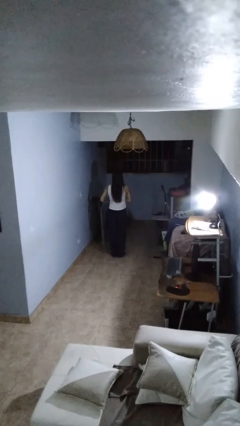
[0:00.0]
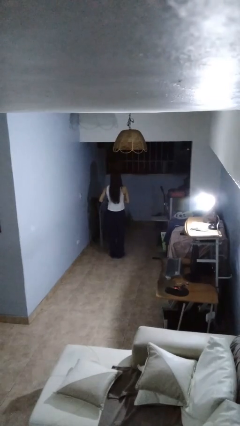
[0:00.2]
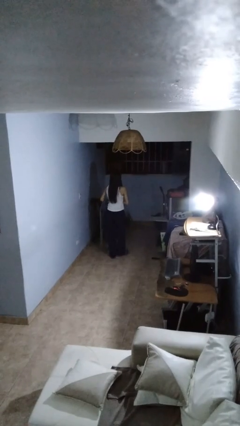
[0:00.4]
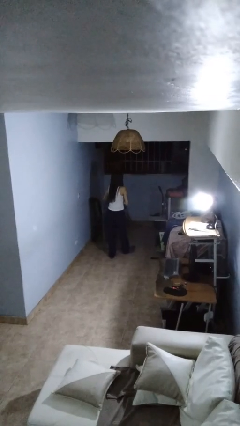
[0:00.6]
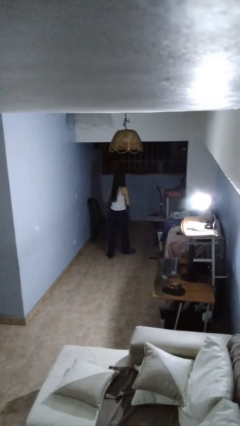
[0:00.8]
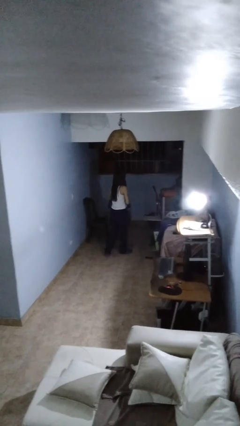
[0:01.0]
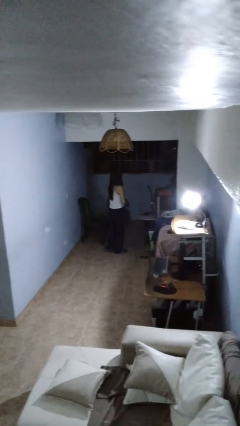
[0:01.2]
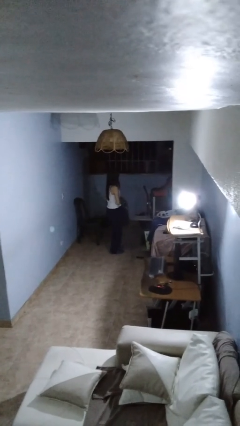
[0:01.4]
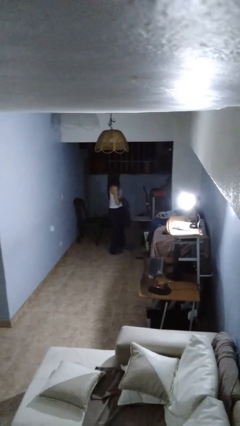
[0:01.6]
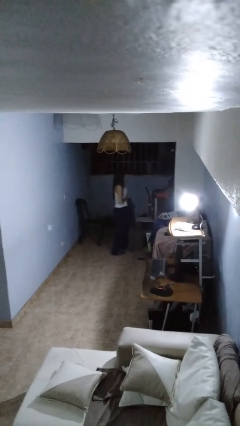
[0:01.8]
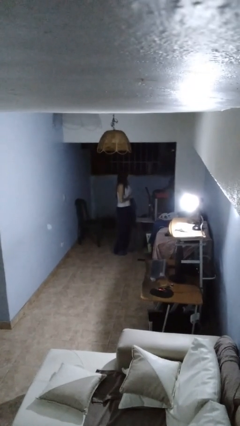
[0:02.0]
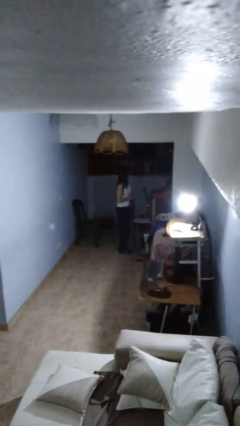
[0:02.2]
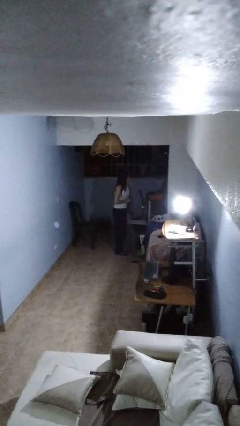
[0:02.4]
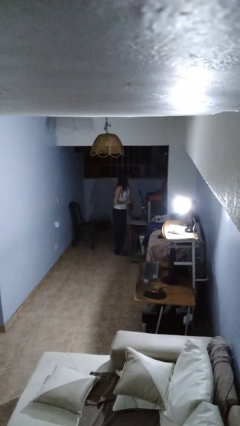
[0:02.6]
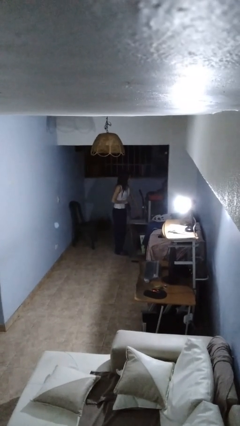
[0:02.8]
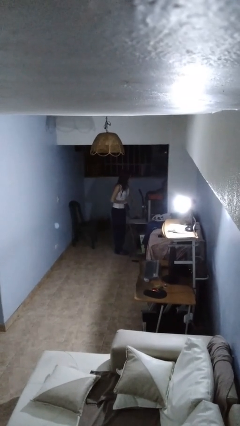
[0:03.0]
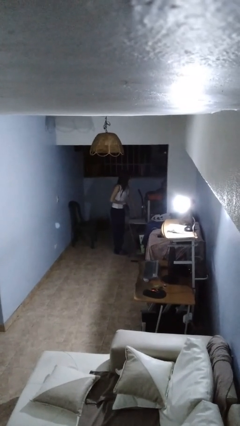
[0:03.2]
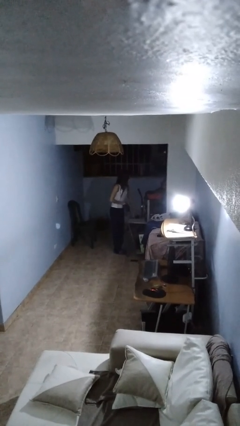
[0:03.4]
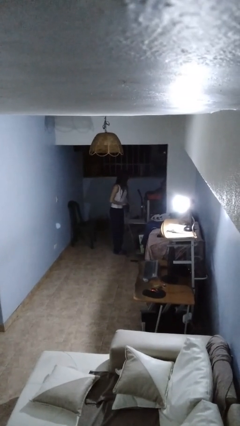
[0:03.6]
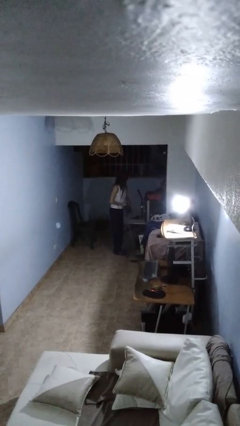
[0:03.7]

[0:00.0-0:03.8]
person carries furniture

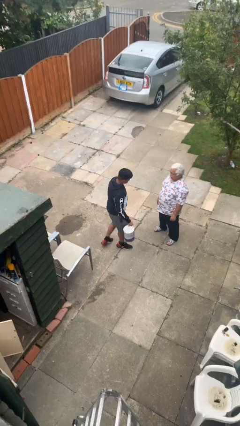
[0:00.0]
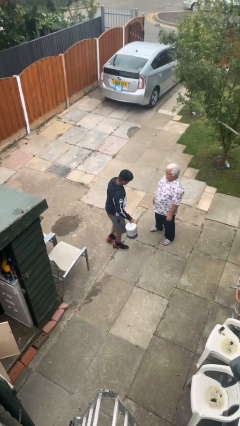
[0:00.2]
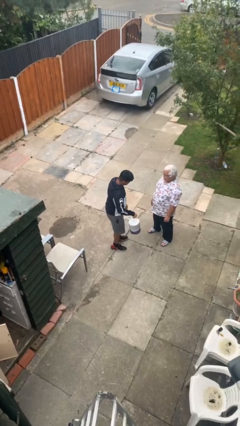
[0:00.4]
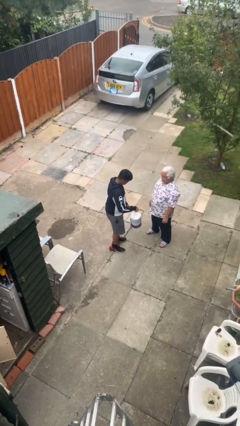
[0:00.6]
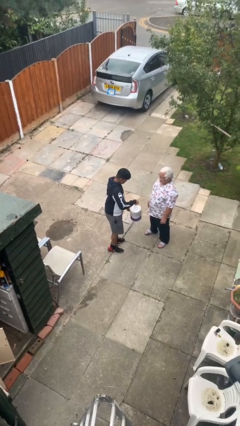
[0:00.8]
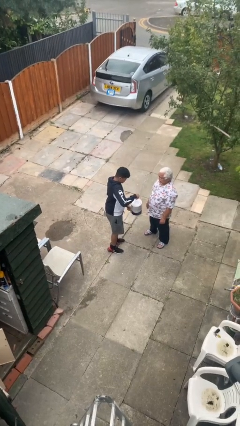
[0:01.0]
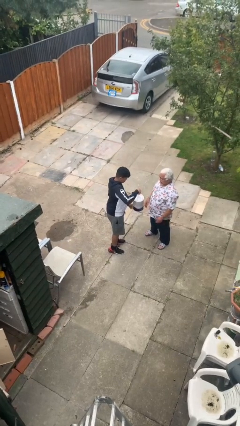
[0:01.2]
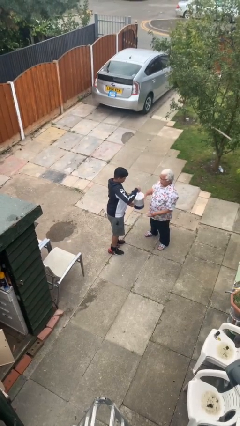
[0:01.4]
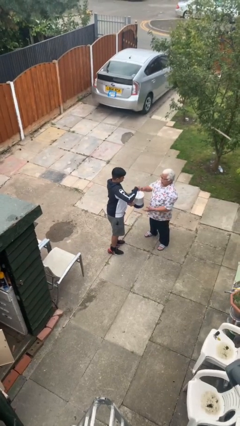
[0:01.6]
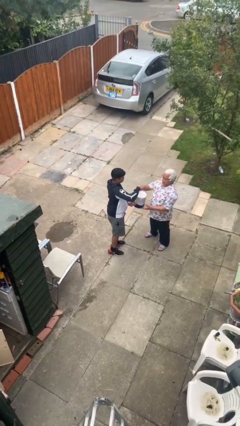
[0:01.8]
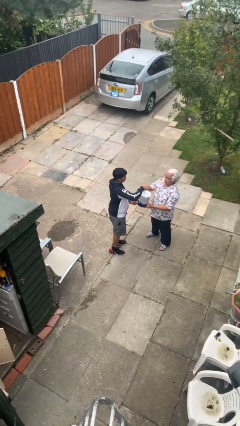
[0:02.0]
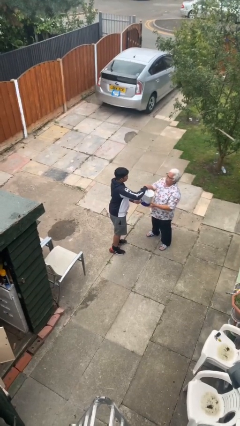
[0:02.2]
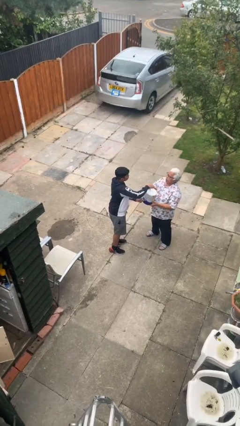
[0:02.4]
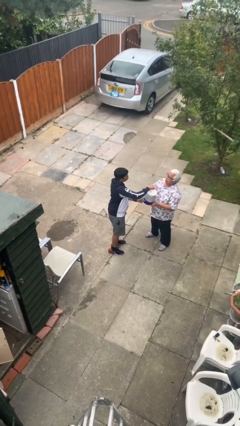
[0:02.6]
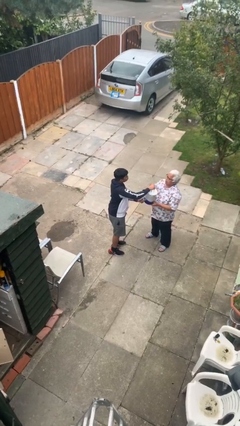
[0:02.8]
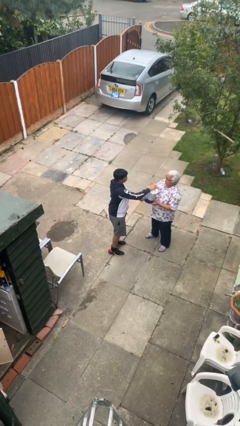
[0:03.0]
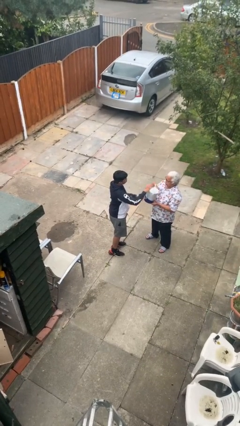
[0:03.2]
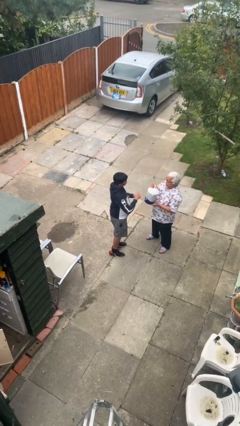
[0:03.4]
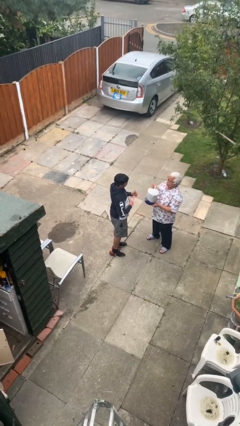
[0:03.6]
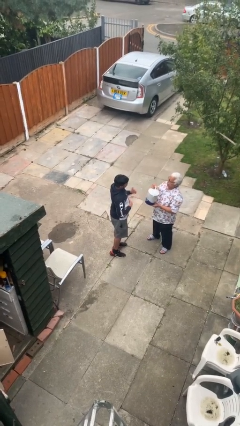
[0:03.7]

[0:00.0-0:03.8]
person transfers object to person

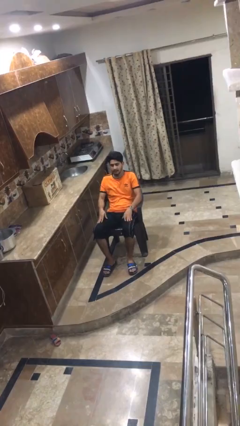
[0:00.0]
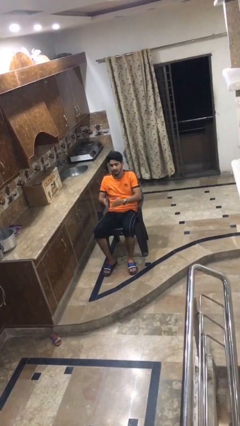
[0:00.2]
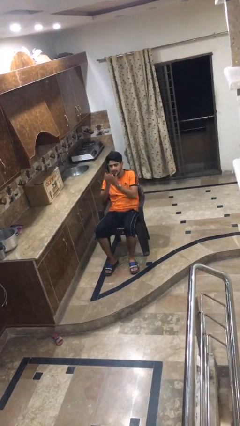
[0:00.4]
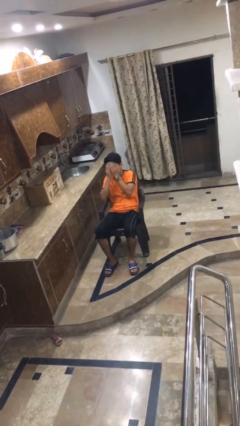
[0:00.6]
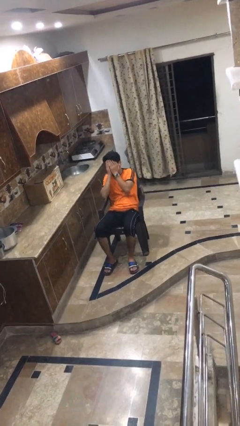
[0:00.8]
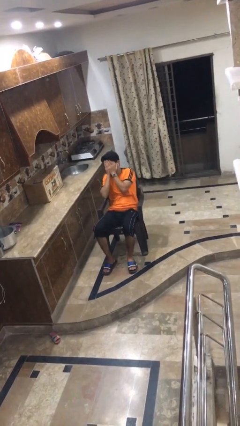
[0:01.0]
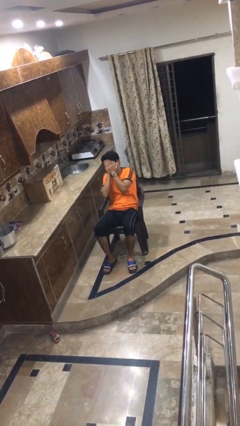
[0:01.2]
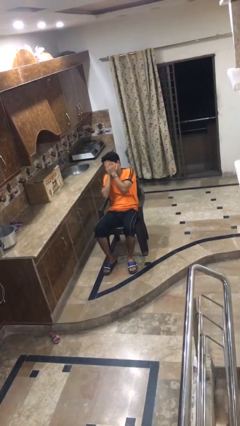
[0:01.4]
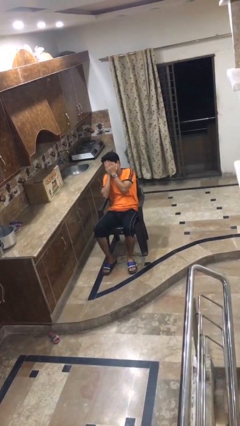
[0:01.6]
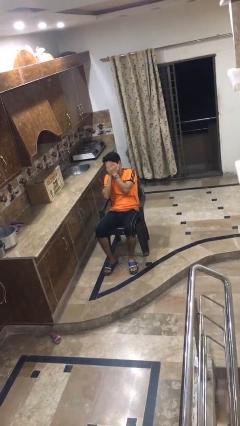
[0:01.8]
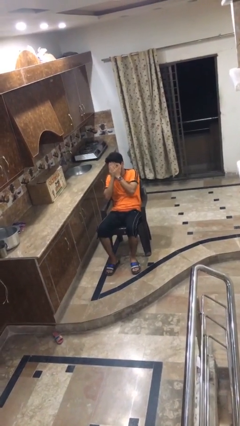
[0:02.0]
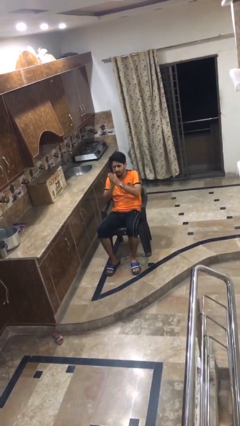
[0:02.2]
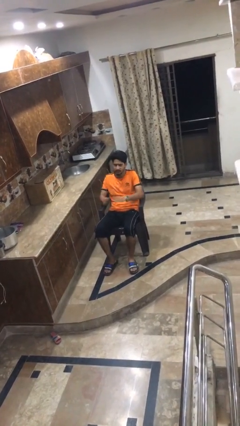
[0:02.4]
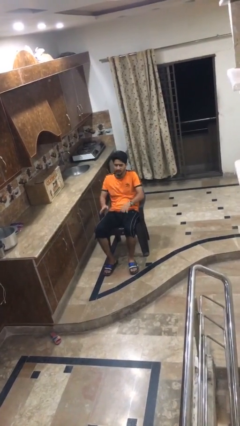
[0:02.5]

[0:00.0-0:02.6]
person covers face with hands

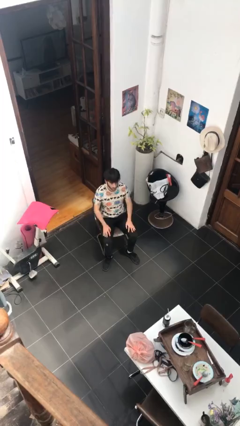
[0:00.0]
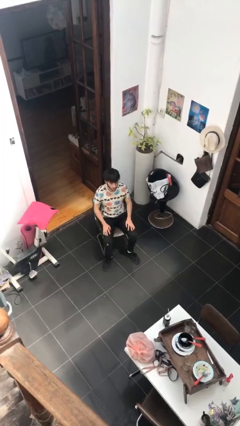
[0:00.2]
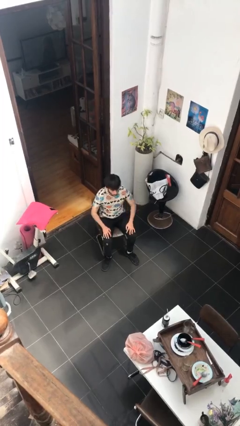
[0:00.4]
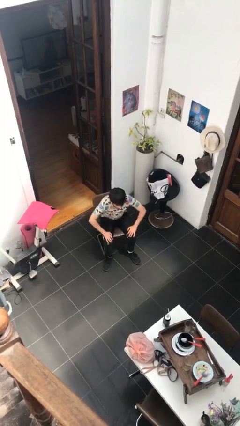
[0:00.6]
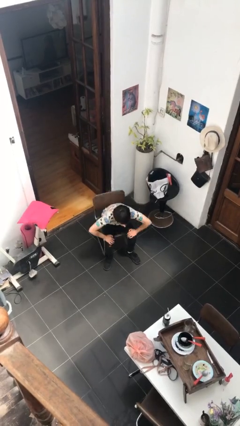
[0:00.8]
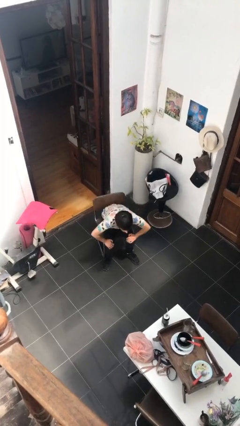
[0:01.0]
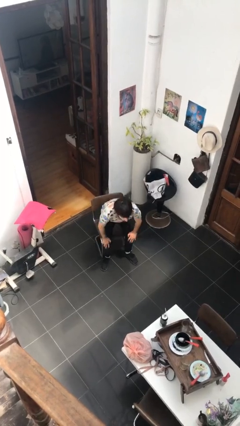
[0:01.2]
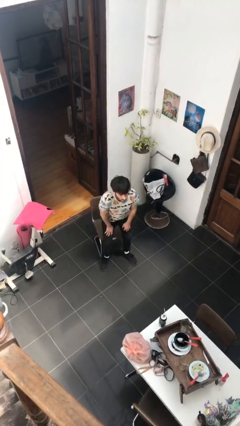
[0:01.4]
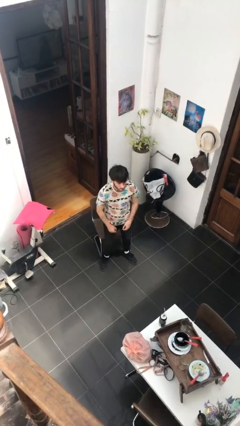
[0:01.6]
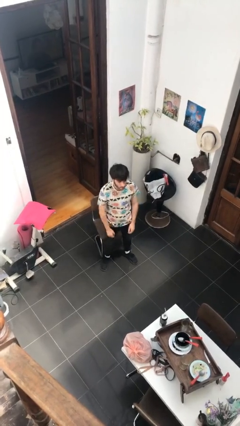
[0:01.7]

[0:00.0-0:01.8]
person stands up

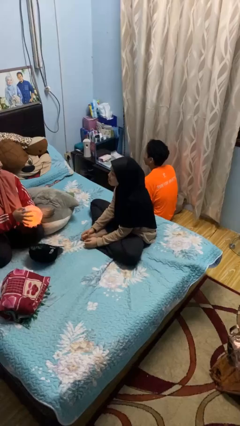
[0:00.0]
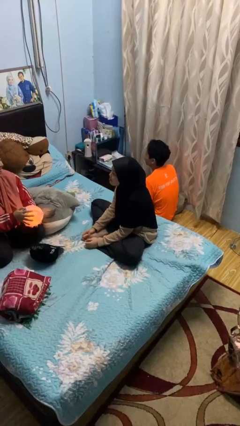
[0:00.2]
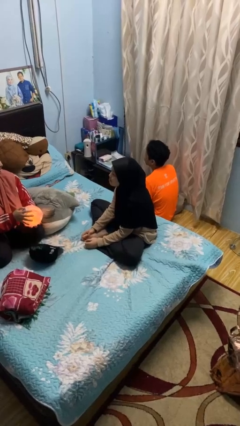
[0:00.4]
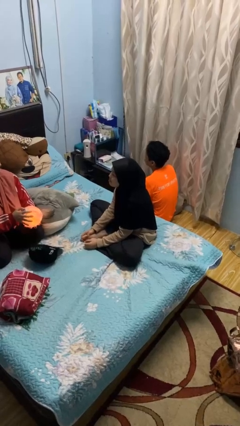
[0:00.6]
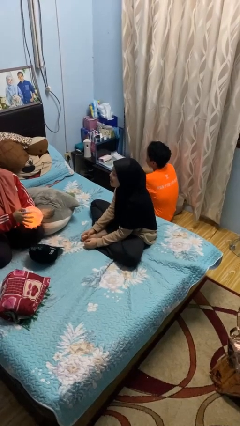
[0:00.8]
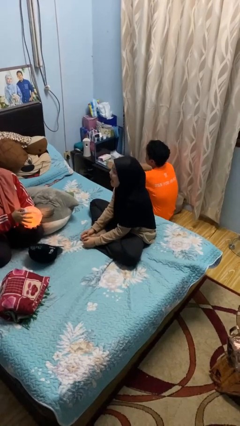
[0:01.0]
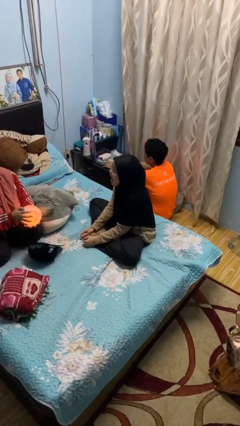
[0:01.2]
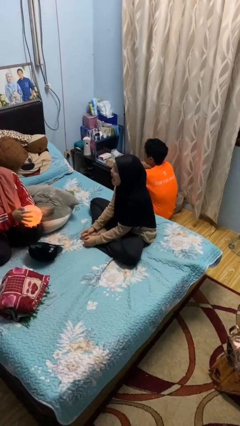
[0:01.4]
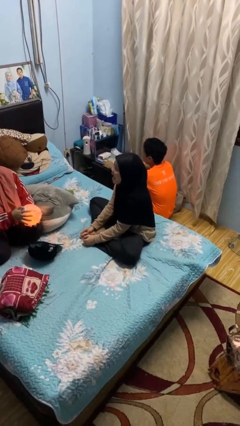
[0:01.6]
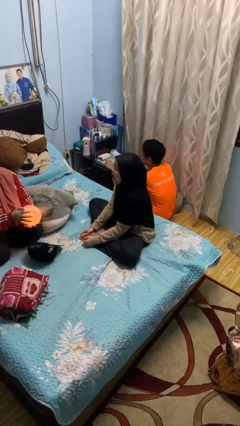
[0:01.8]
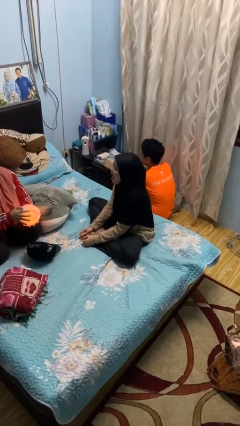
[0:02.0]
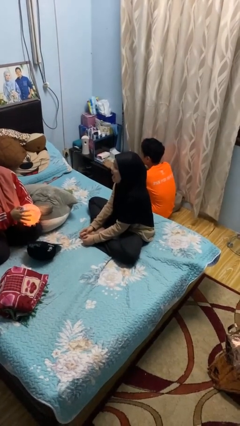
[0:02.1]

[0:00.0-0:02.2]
person laughs with person

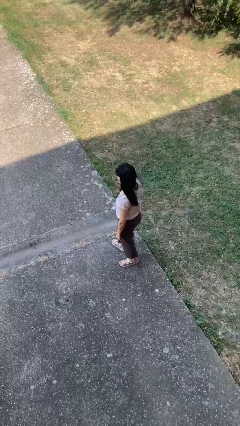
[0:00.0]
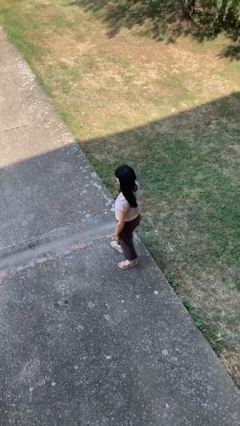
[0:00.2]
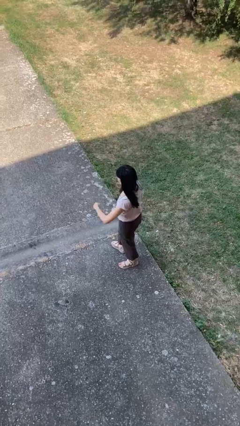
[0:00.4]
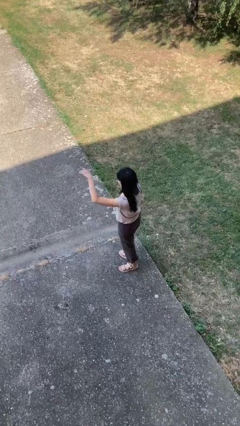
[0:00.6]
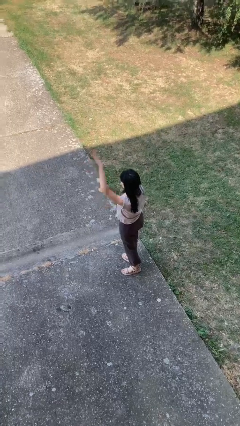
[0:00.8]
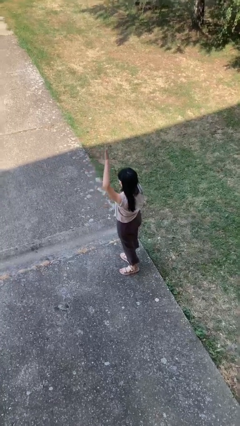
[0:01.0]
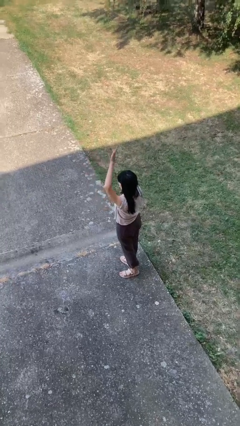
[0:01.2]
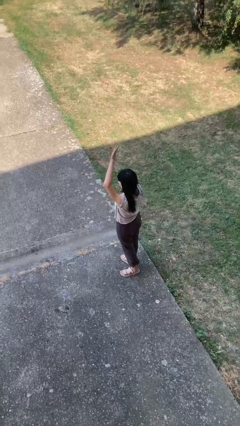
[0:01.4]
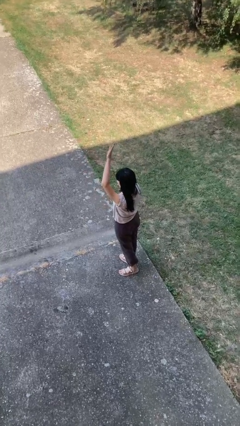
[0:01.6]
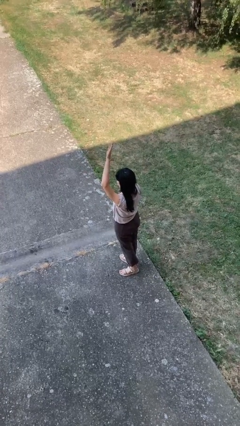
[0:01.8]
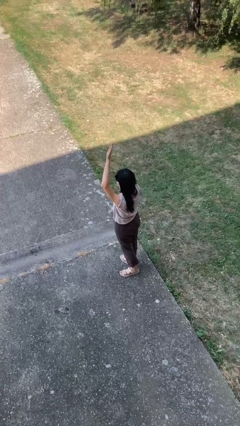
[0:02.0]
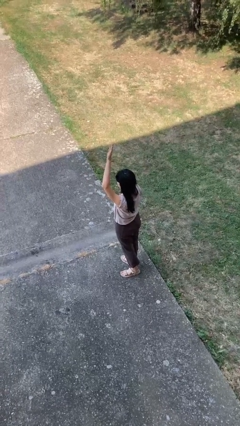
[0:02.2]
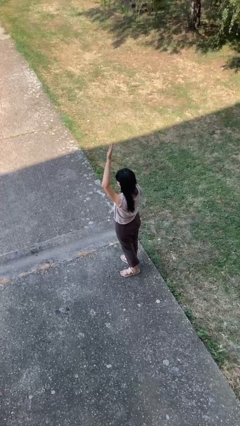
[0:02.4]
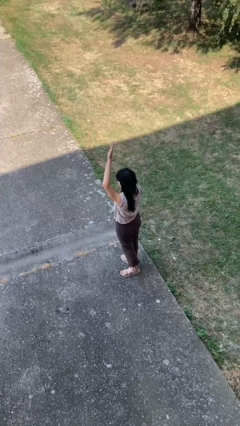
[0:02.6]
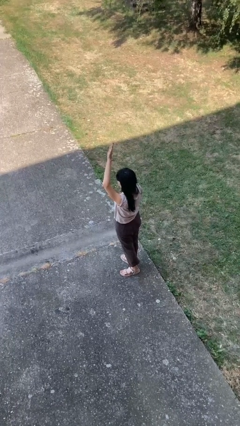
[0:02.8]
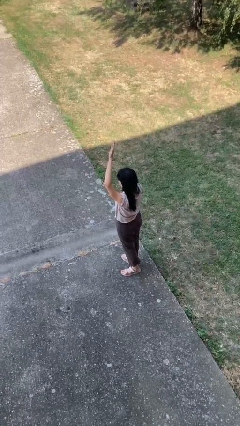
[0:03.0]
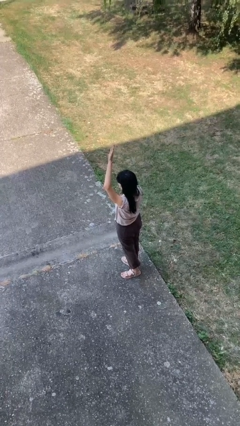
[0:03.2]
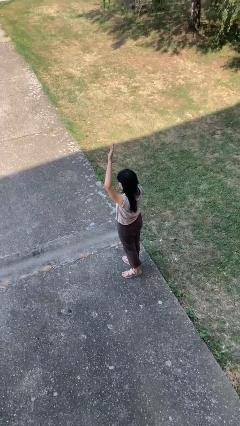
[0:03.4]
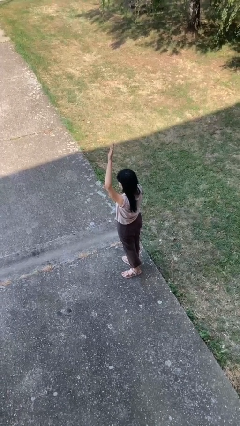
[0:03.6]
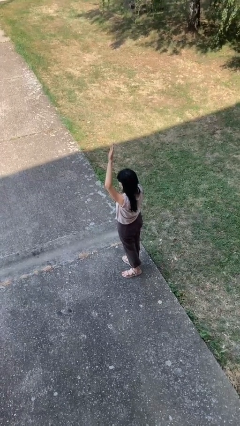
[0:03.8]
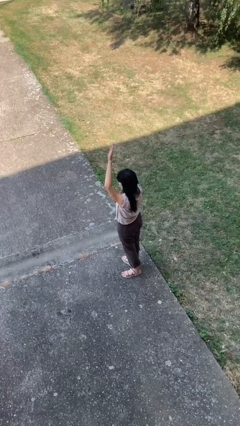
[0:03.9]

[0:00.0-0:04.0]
person gestures raise hand
